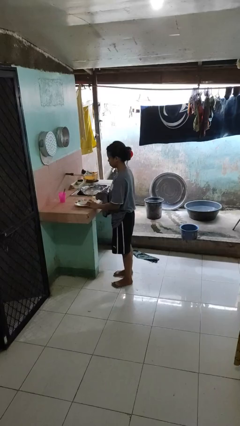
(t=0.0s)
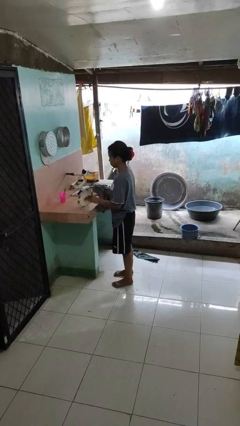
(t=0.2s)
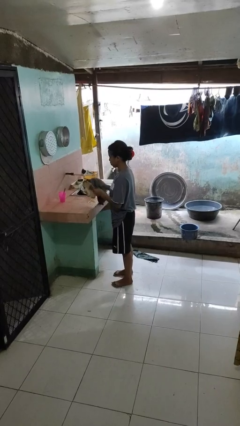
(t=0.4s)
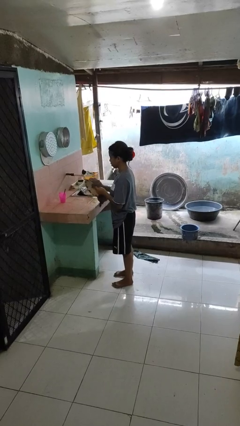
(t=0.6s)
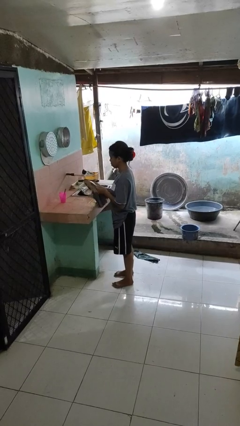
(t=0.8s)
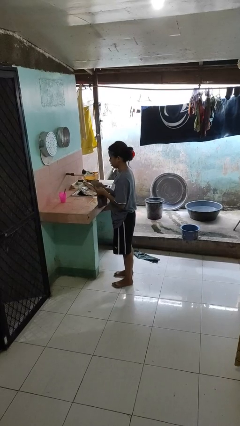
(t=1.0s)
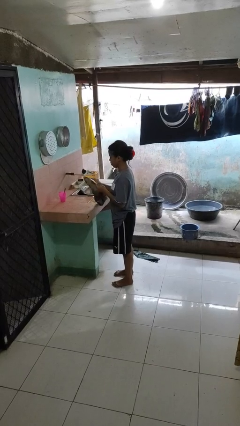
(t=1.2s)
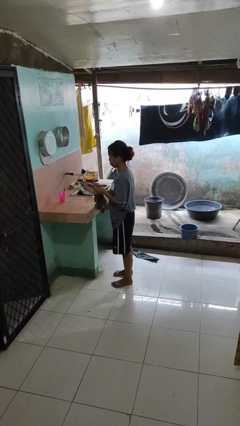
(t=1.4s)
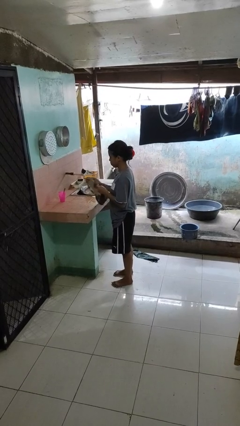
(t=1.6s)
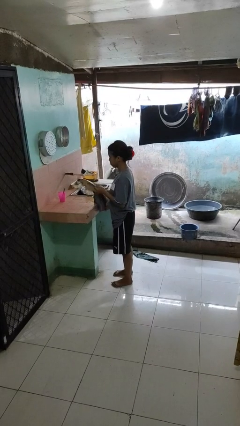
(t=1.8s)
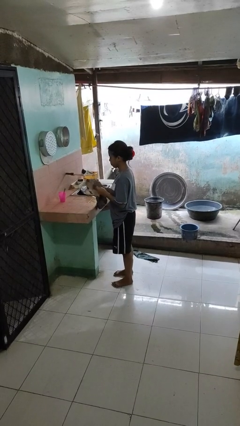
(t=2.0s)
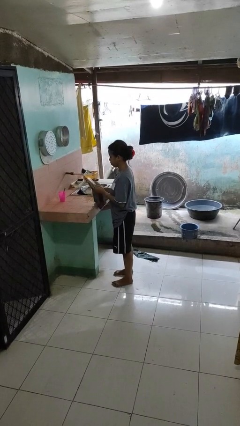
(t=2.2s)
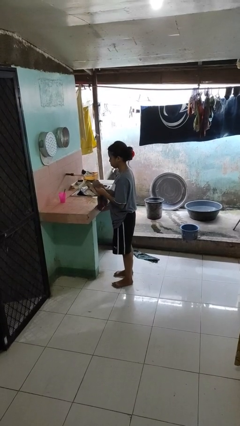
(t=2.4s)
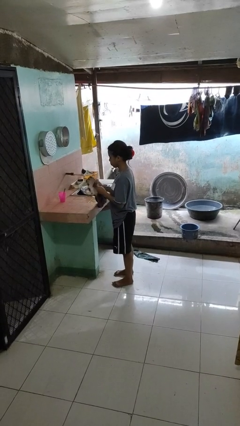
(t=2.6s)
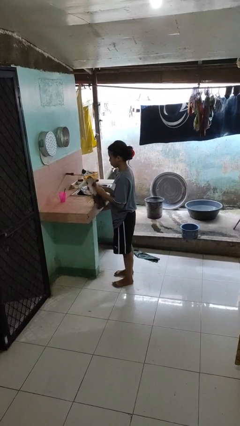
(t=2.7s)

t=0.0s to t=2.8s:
person dries dish

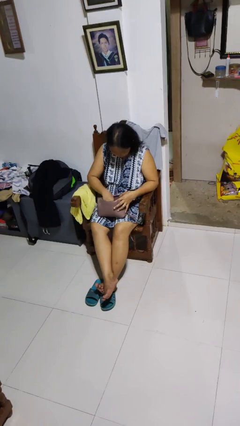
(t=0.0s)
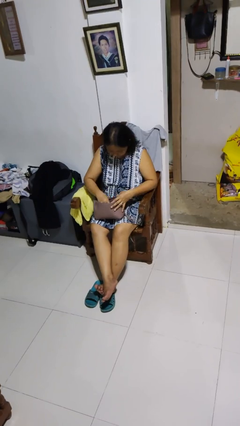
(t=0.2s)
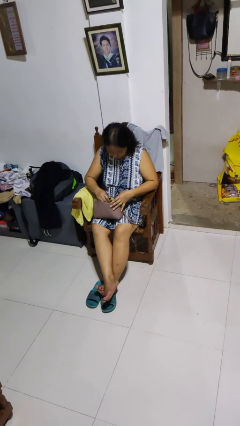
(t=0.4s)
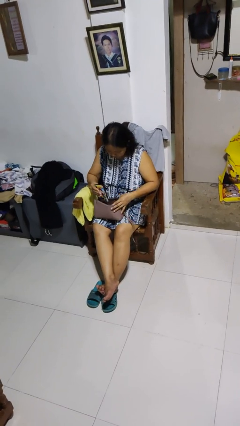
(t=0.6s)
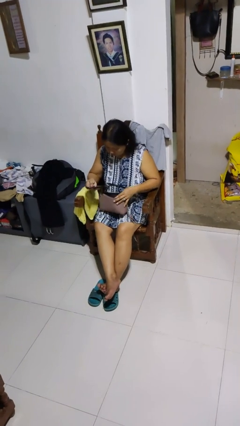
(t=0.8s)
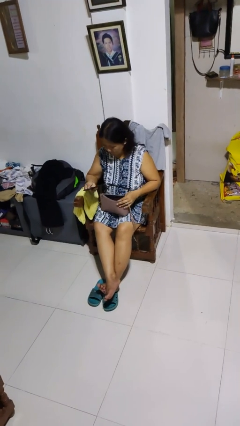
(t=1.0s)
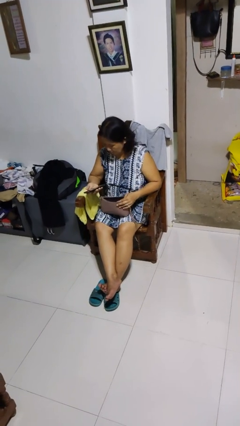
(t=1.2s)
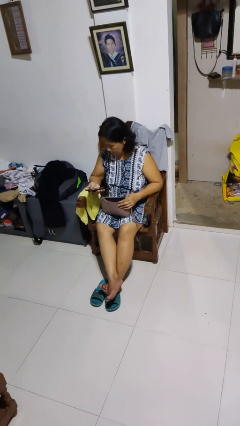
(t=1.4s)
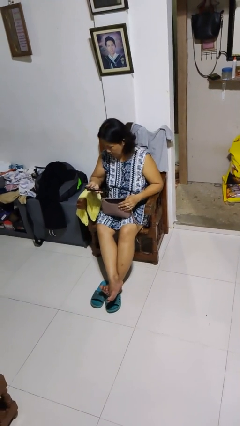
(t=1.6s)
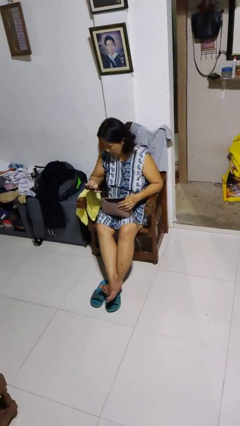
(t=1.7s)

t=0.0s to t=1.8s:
person takes object from purse

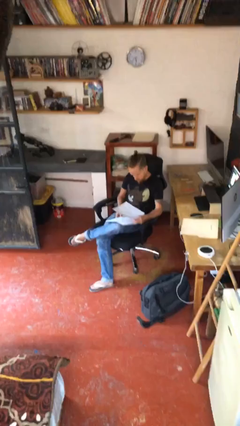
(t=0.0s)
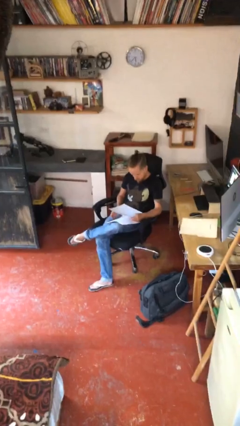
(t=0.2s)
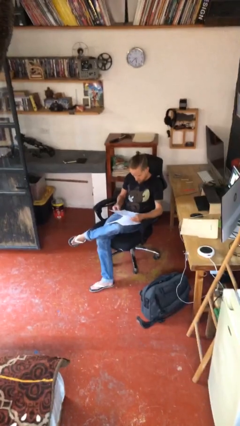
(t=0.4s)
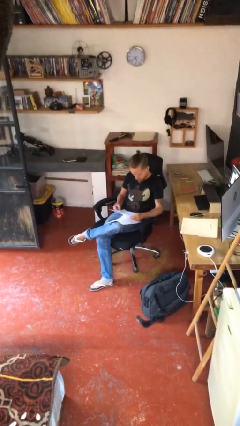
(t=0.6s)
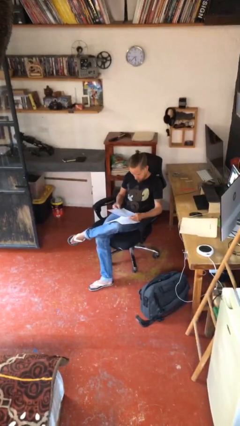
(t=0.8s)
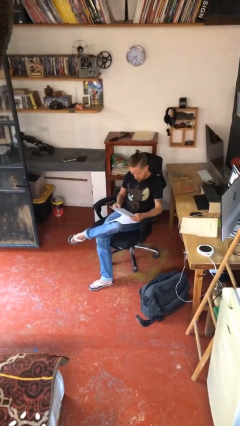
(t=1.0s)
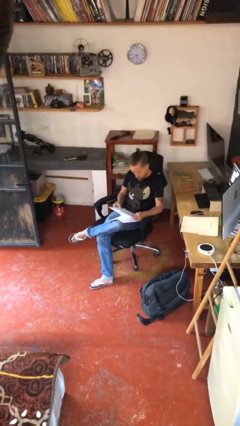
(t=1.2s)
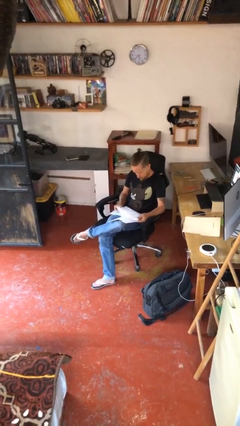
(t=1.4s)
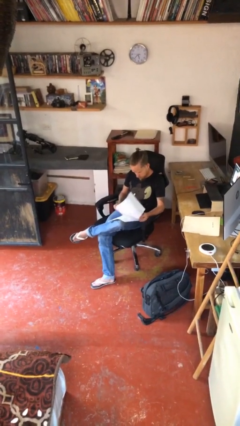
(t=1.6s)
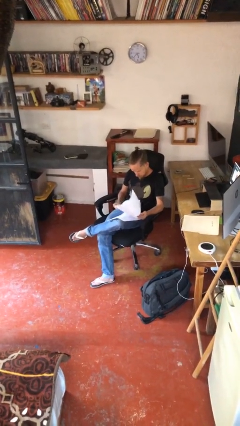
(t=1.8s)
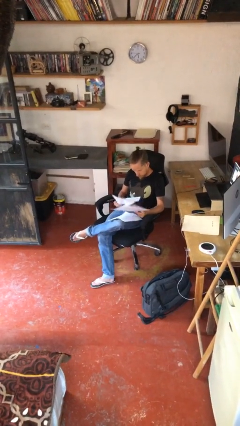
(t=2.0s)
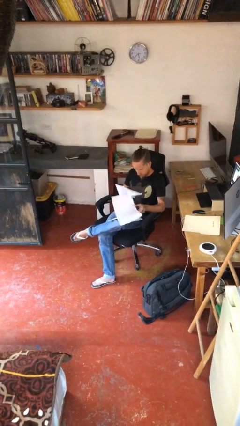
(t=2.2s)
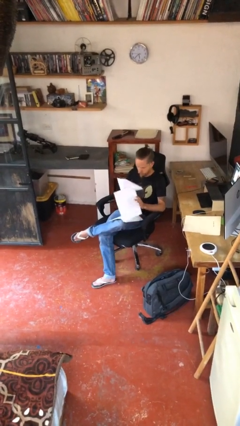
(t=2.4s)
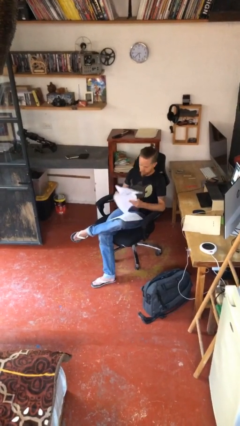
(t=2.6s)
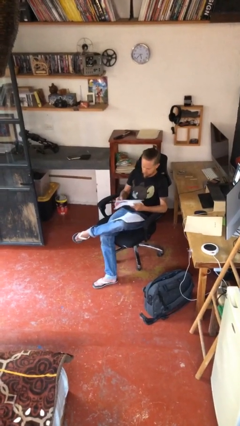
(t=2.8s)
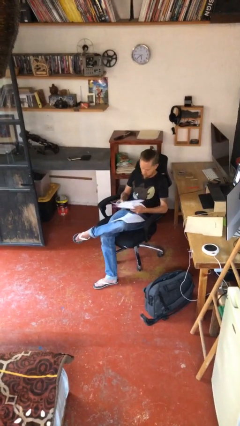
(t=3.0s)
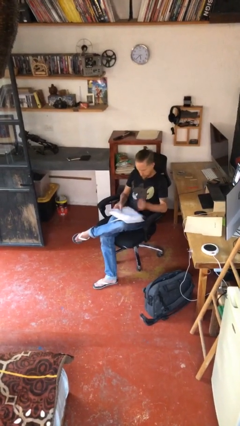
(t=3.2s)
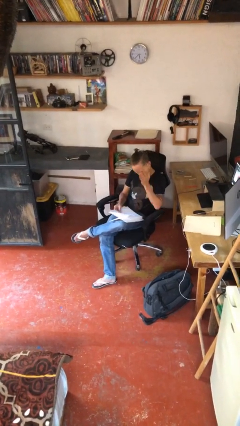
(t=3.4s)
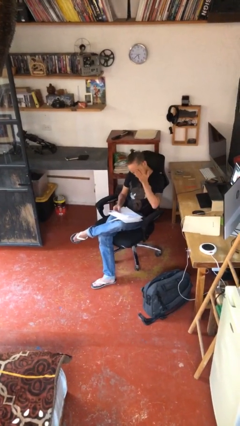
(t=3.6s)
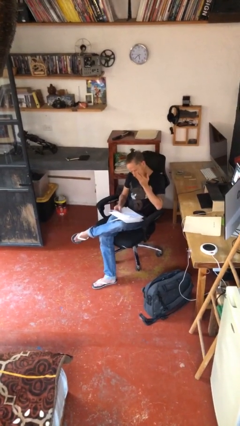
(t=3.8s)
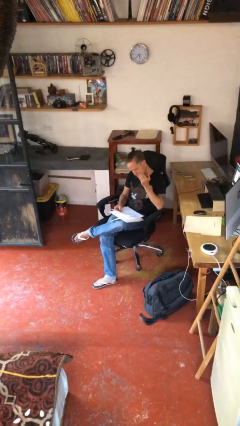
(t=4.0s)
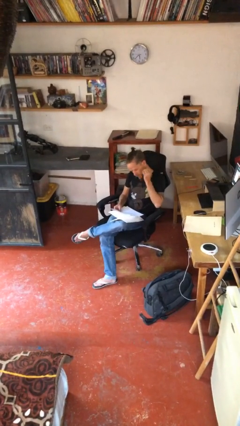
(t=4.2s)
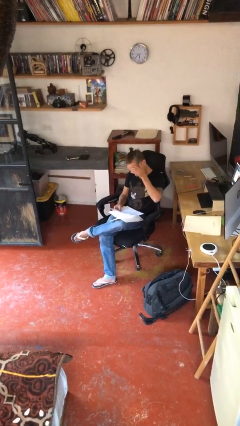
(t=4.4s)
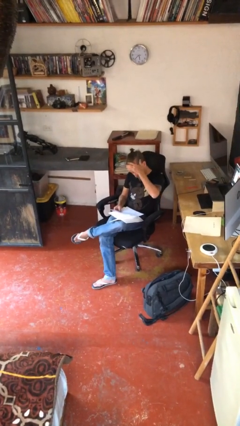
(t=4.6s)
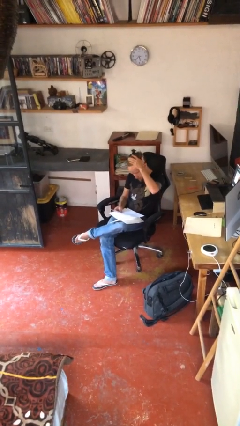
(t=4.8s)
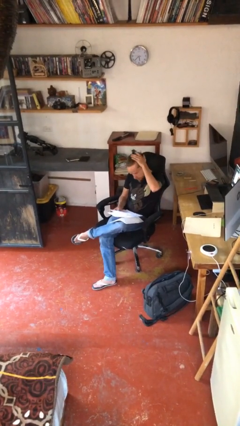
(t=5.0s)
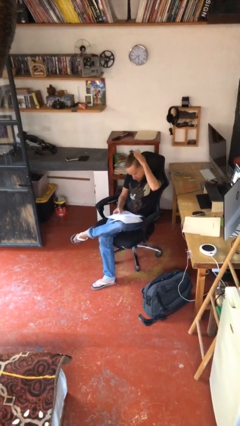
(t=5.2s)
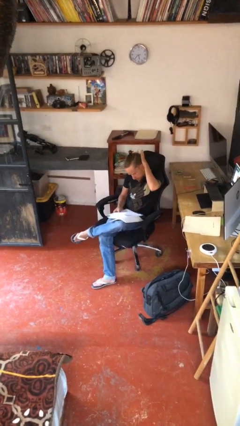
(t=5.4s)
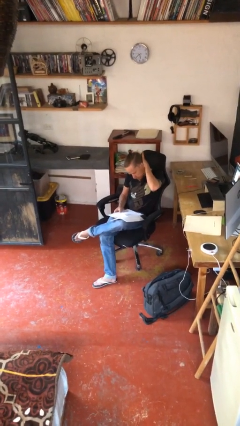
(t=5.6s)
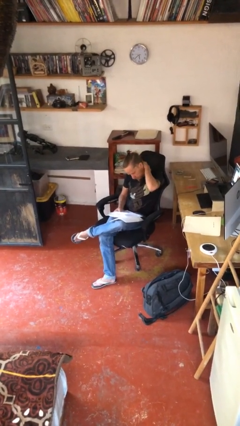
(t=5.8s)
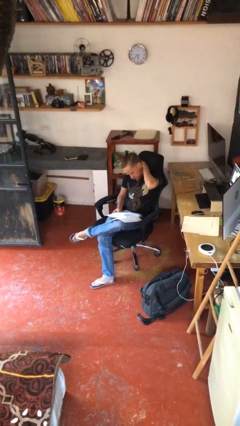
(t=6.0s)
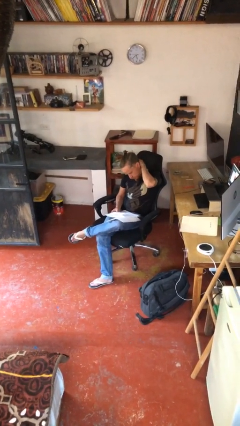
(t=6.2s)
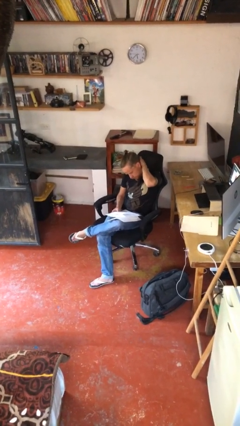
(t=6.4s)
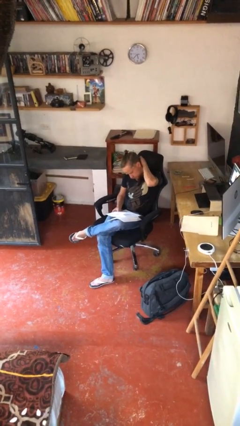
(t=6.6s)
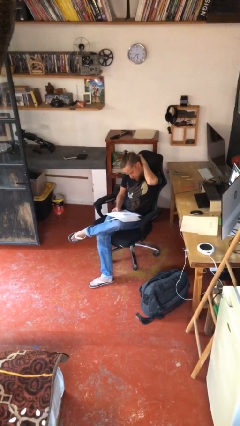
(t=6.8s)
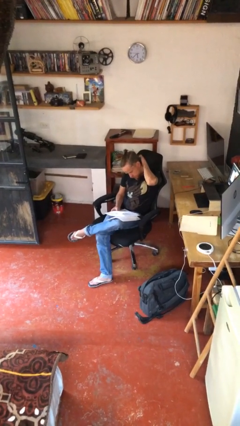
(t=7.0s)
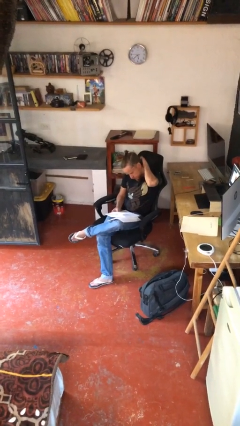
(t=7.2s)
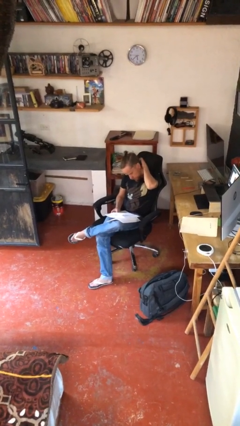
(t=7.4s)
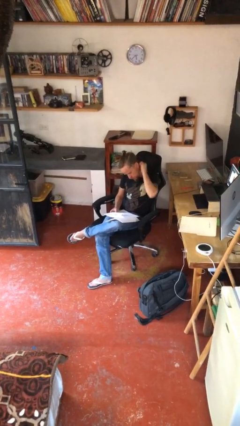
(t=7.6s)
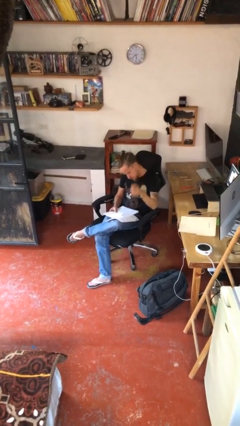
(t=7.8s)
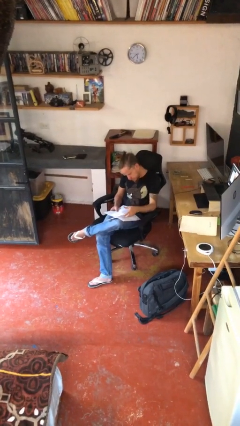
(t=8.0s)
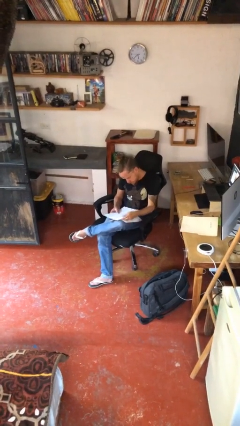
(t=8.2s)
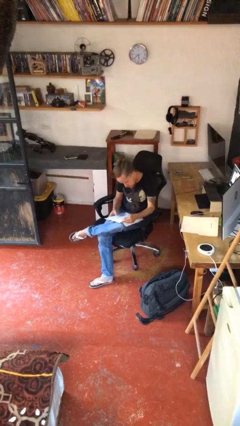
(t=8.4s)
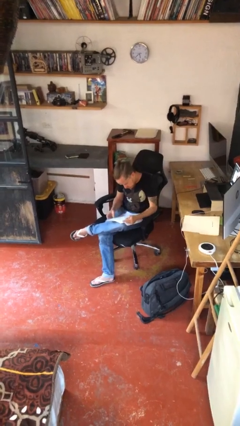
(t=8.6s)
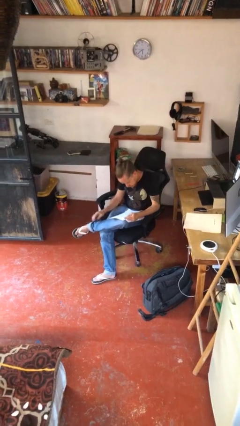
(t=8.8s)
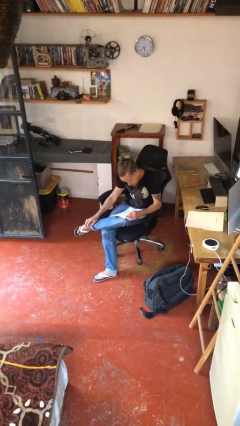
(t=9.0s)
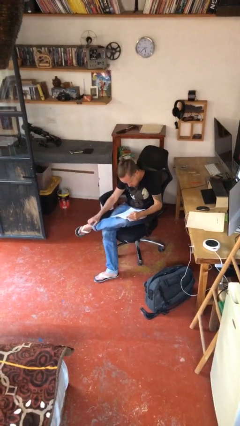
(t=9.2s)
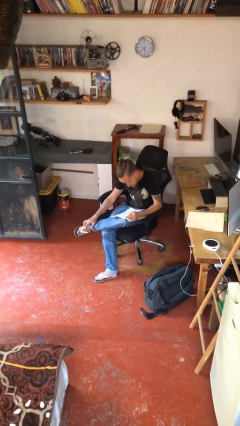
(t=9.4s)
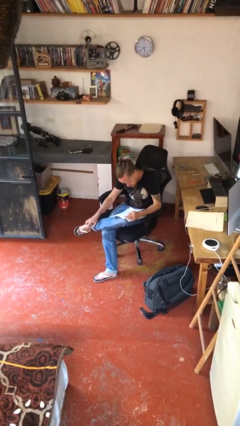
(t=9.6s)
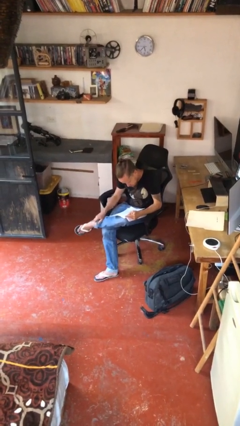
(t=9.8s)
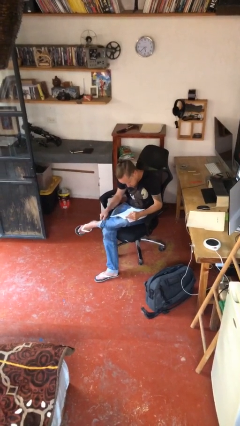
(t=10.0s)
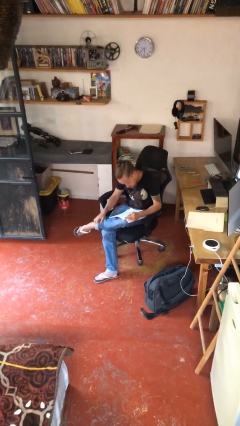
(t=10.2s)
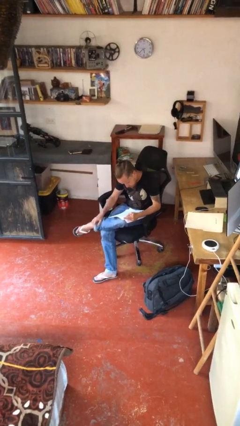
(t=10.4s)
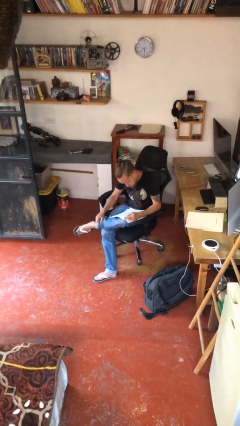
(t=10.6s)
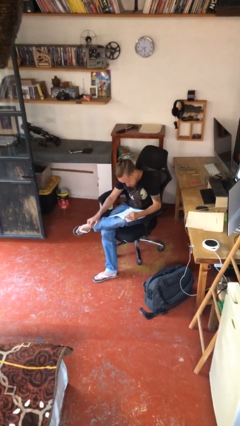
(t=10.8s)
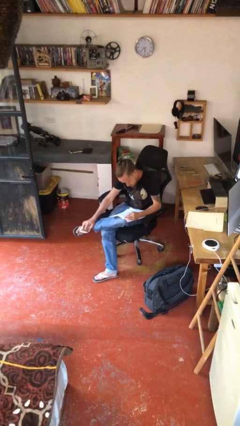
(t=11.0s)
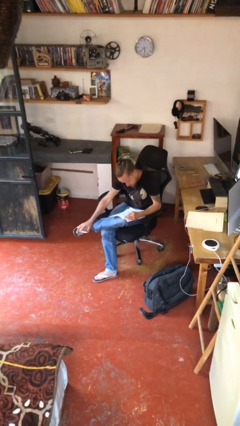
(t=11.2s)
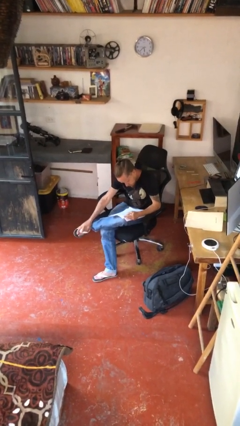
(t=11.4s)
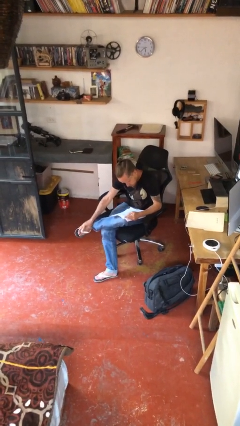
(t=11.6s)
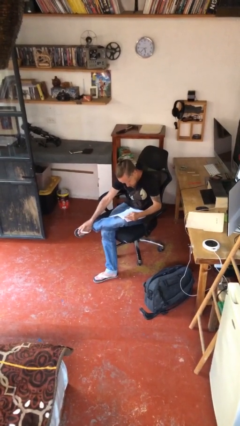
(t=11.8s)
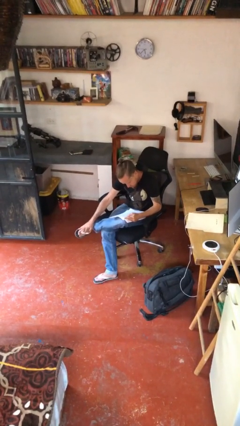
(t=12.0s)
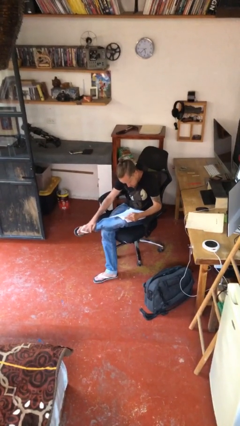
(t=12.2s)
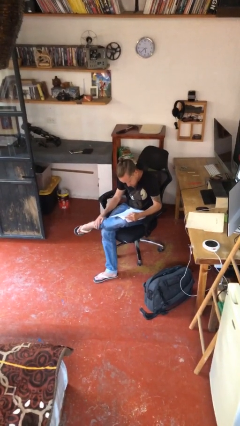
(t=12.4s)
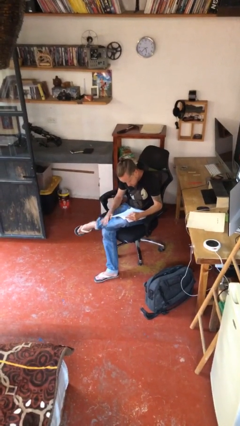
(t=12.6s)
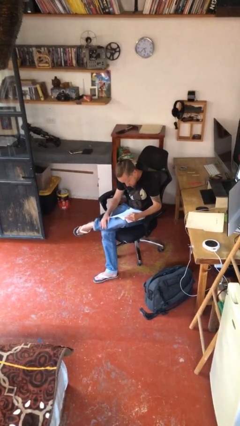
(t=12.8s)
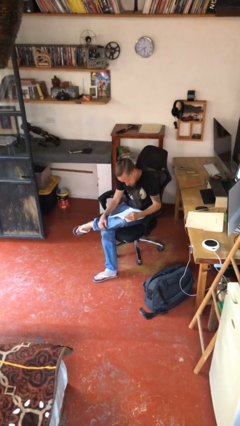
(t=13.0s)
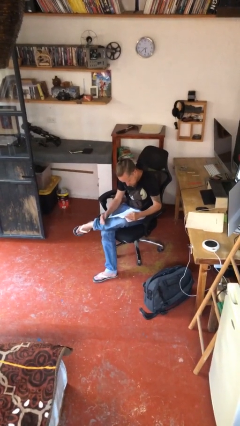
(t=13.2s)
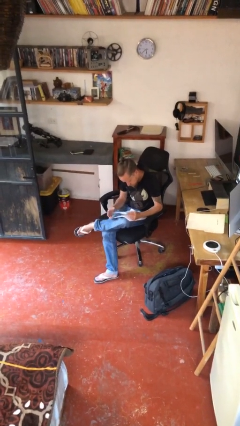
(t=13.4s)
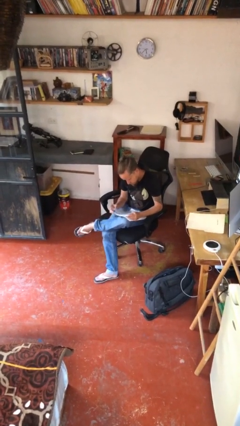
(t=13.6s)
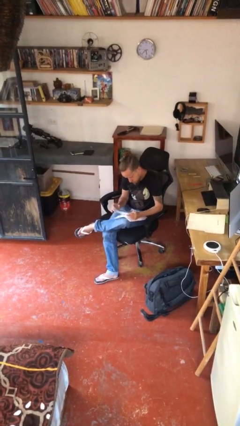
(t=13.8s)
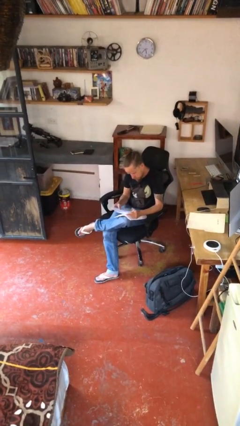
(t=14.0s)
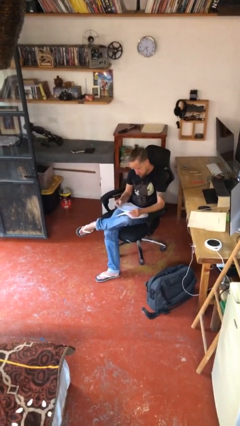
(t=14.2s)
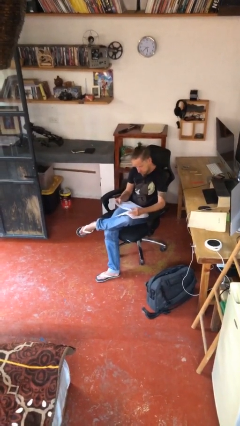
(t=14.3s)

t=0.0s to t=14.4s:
person reads document
